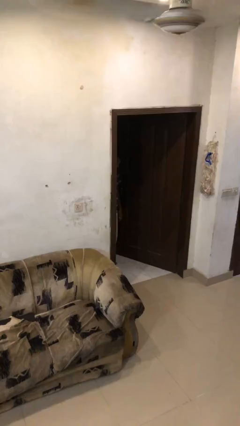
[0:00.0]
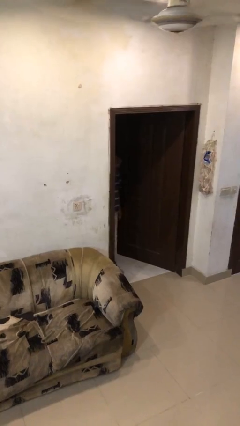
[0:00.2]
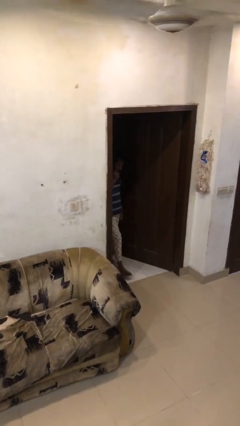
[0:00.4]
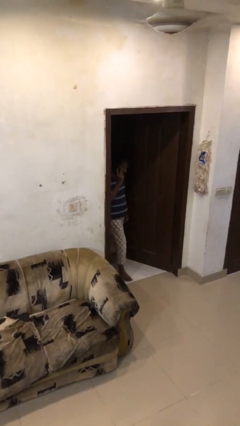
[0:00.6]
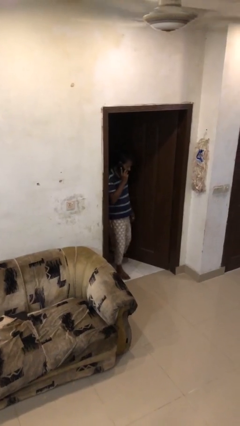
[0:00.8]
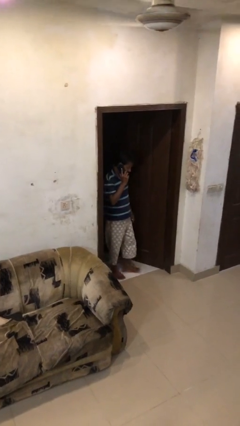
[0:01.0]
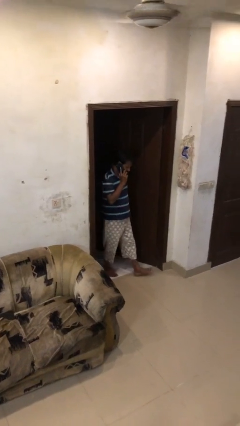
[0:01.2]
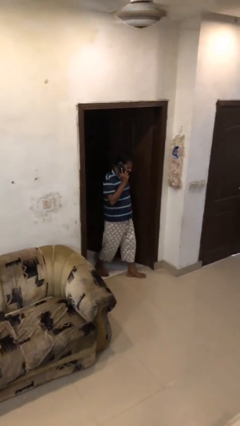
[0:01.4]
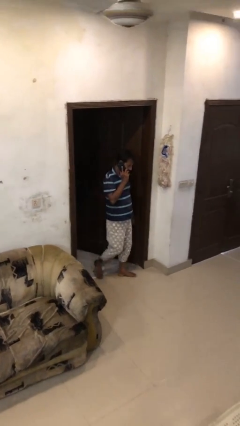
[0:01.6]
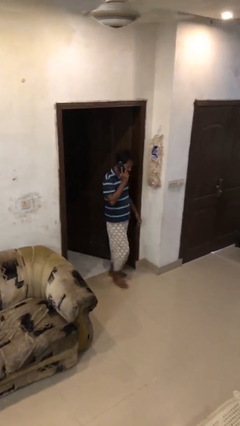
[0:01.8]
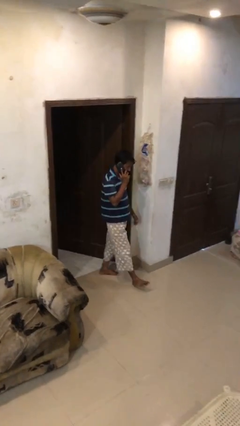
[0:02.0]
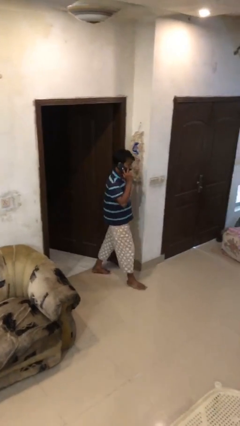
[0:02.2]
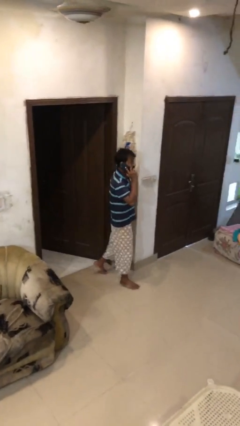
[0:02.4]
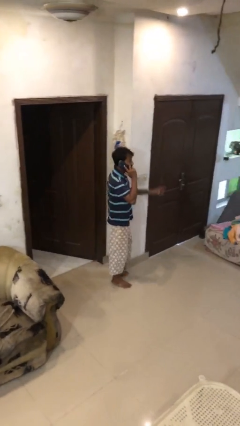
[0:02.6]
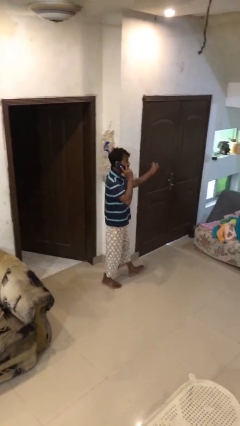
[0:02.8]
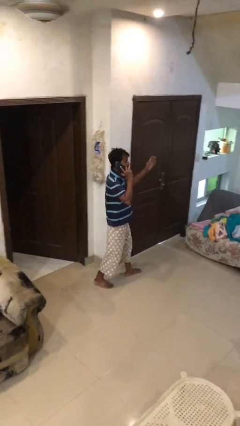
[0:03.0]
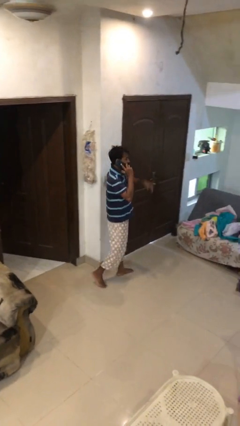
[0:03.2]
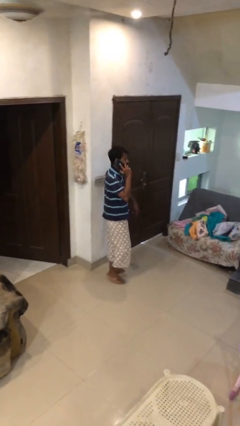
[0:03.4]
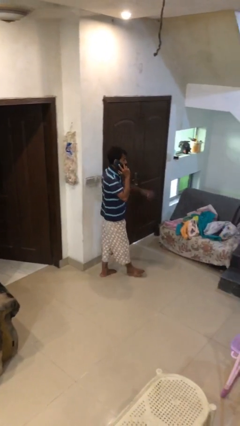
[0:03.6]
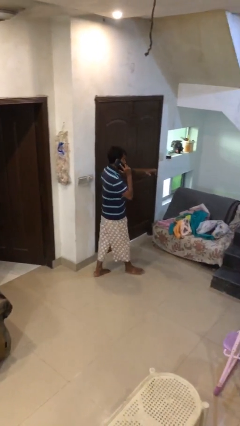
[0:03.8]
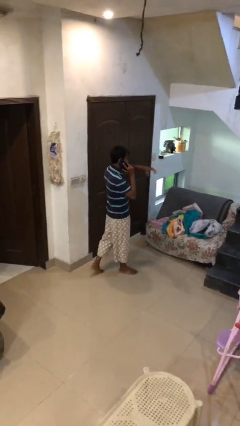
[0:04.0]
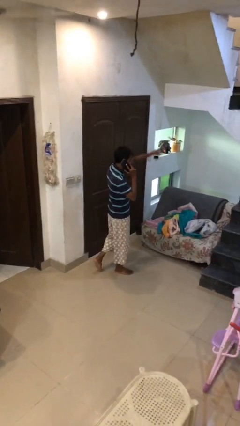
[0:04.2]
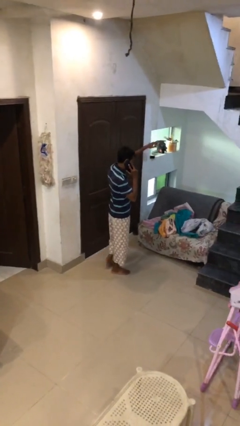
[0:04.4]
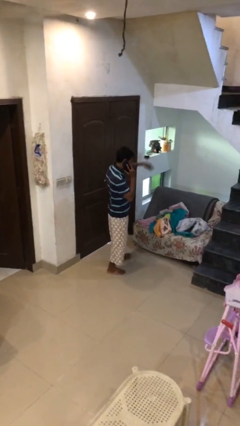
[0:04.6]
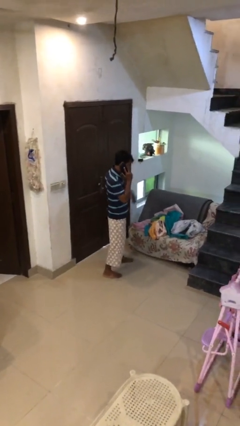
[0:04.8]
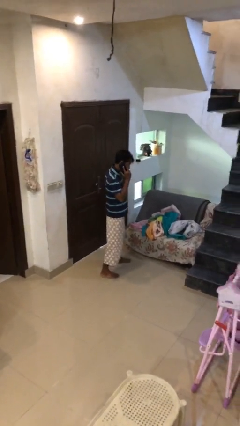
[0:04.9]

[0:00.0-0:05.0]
person enters scene through structure

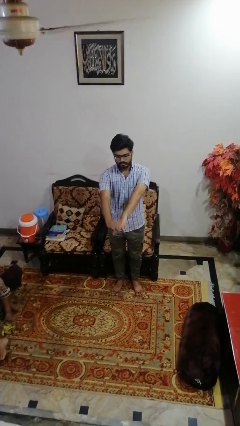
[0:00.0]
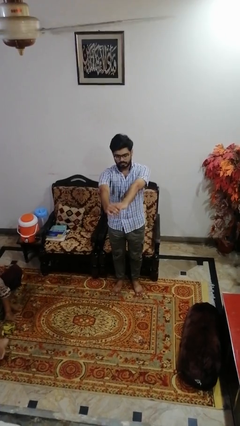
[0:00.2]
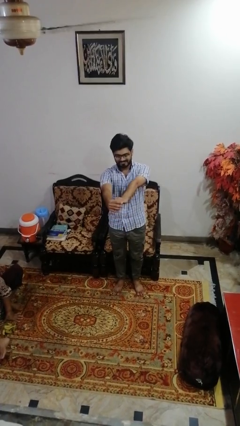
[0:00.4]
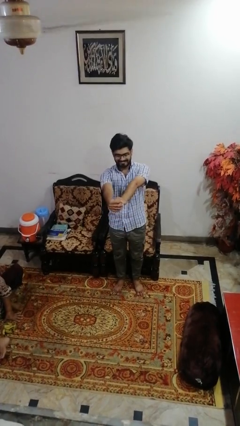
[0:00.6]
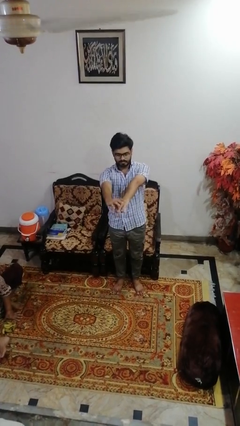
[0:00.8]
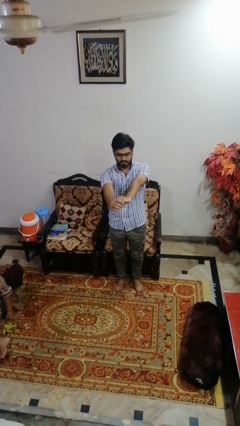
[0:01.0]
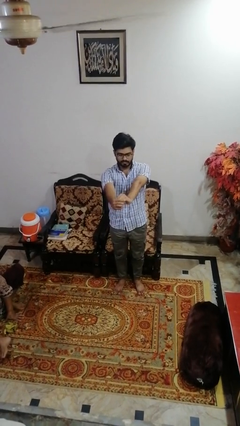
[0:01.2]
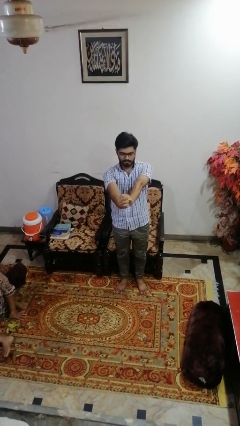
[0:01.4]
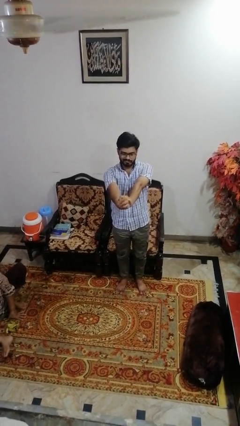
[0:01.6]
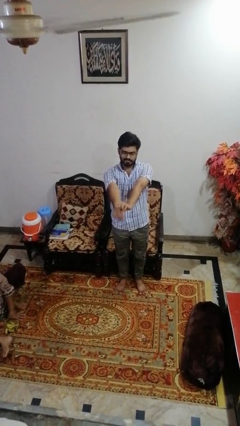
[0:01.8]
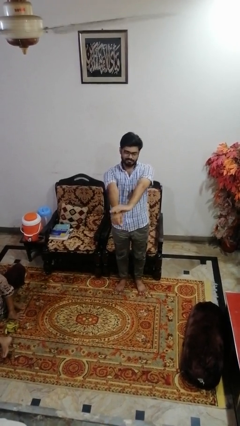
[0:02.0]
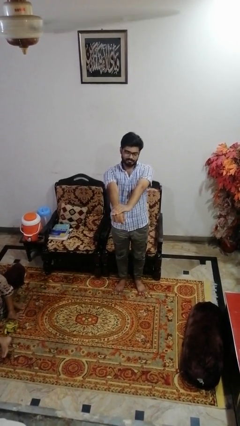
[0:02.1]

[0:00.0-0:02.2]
person cracks knuckles

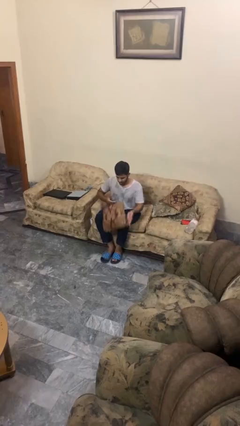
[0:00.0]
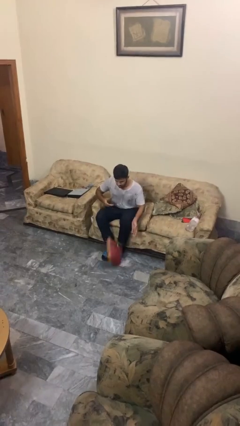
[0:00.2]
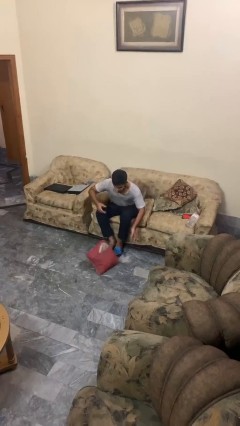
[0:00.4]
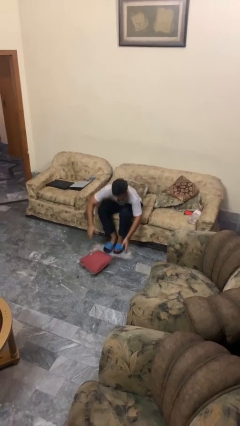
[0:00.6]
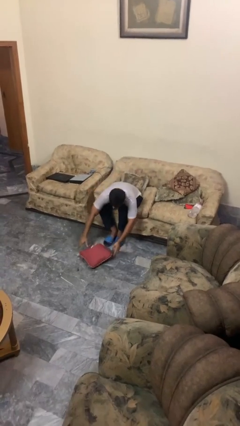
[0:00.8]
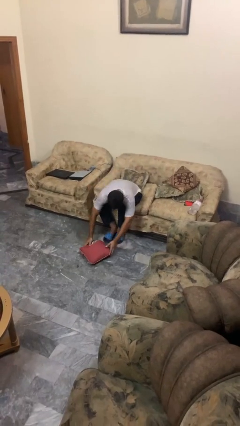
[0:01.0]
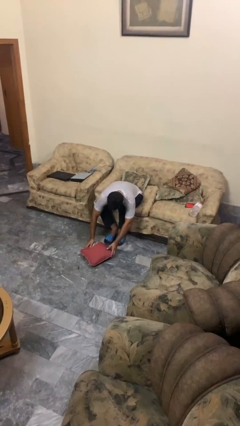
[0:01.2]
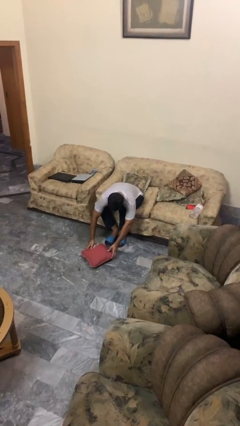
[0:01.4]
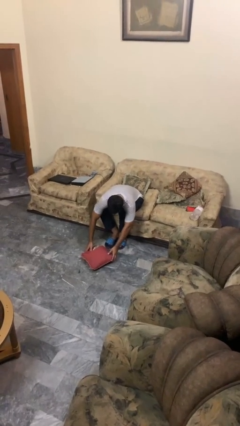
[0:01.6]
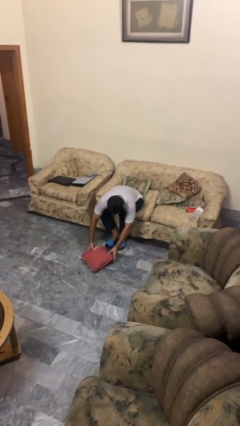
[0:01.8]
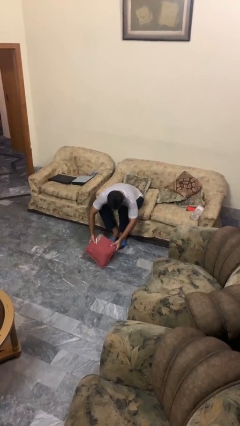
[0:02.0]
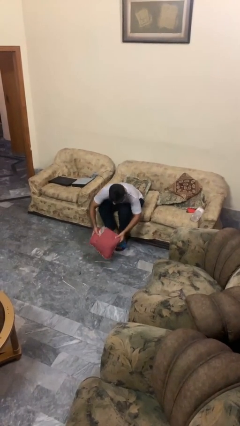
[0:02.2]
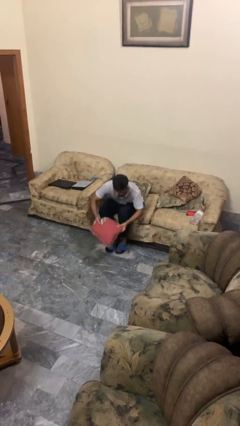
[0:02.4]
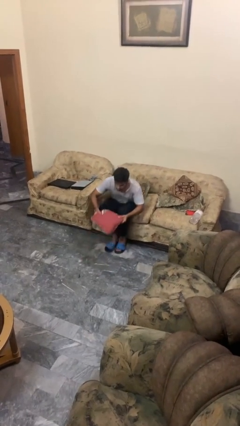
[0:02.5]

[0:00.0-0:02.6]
person drops object

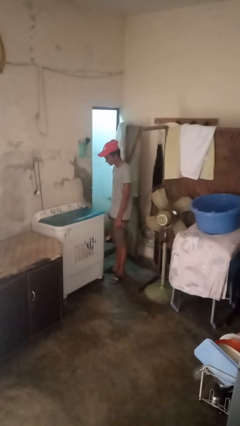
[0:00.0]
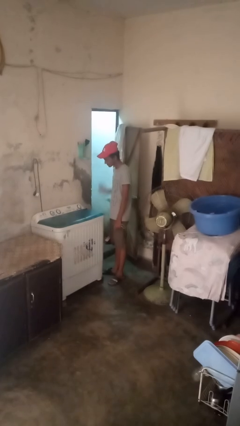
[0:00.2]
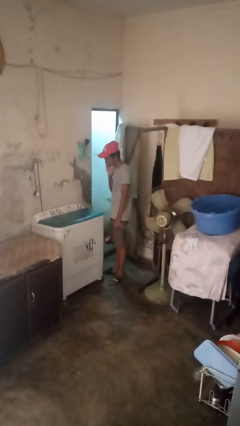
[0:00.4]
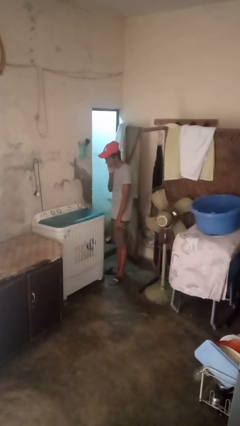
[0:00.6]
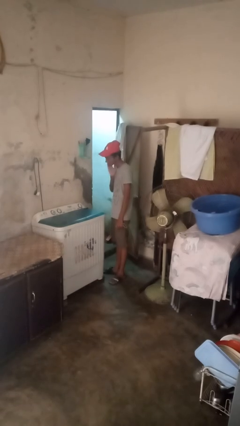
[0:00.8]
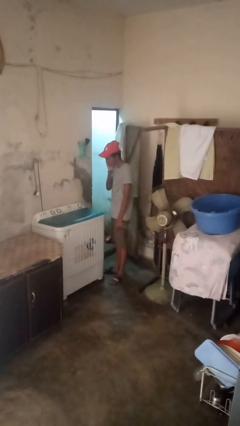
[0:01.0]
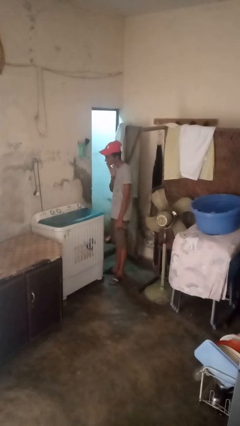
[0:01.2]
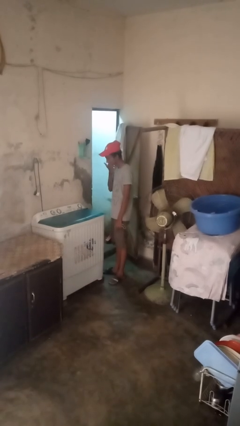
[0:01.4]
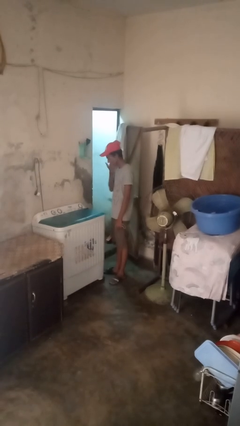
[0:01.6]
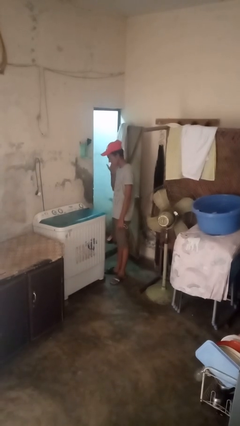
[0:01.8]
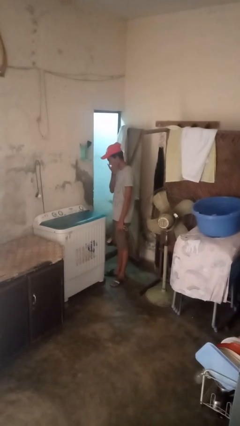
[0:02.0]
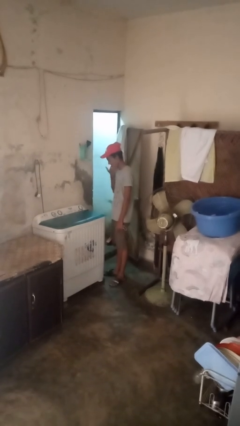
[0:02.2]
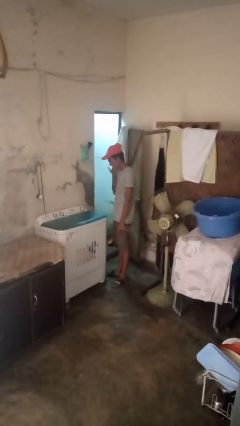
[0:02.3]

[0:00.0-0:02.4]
person applies shaving cream

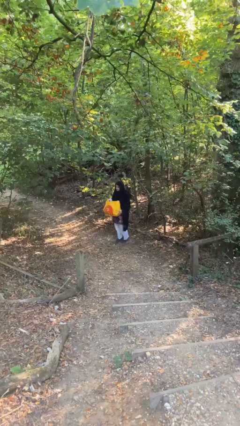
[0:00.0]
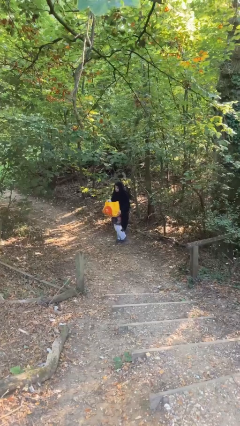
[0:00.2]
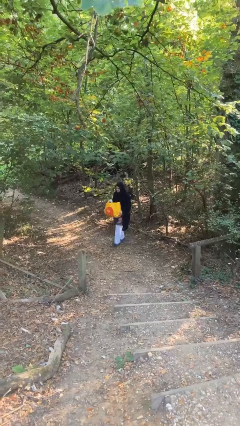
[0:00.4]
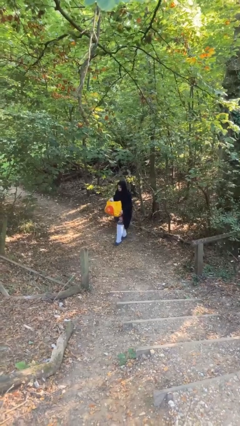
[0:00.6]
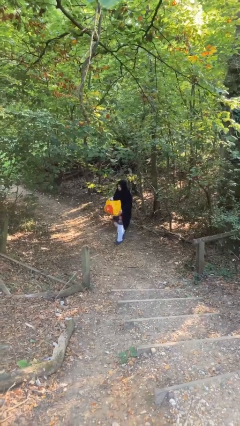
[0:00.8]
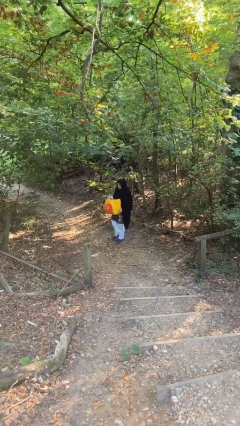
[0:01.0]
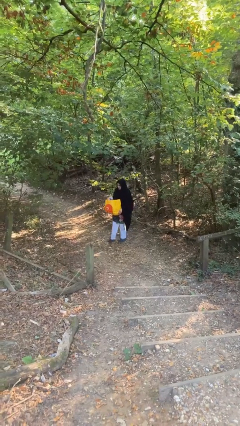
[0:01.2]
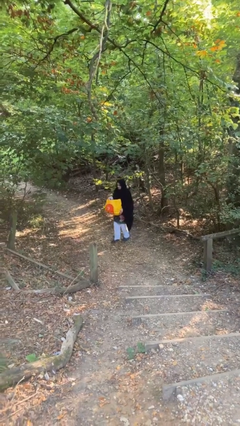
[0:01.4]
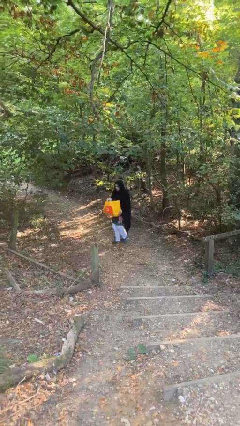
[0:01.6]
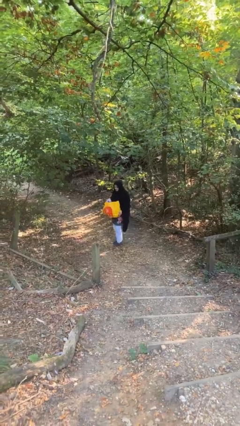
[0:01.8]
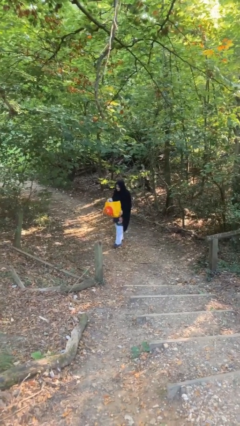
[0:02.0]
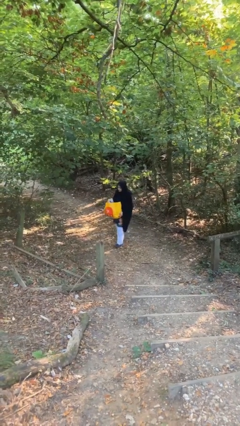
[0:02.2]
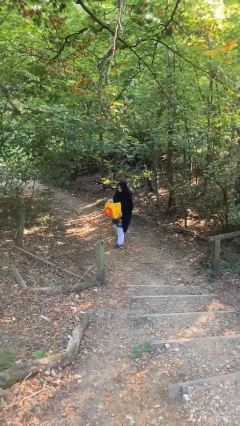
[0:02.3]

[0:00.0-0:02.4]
person carries heavy object

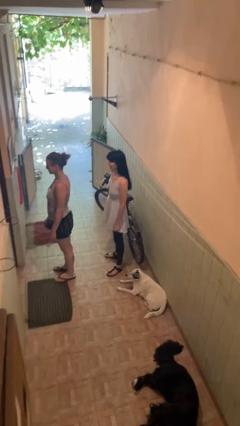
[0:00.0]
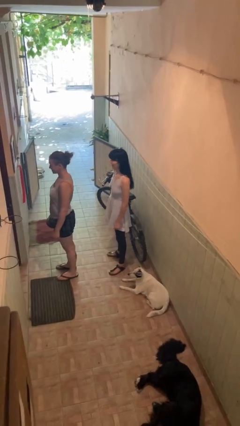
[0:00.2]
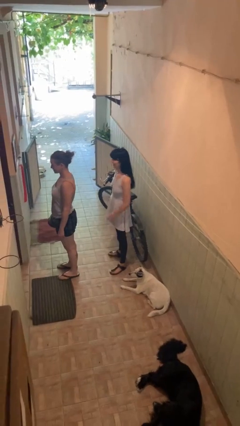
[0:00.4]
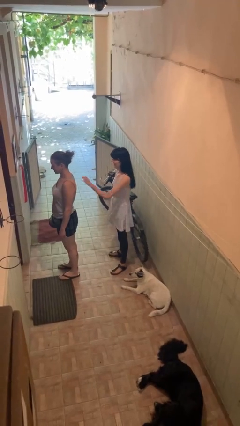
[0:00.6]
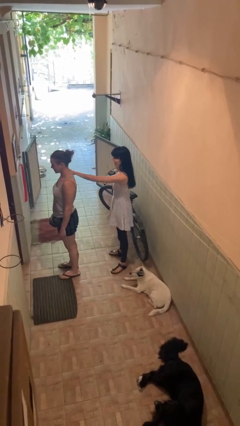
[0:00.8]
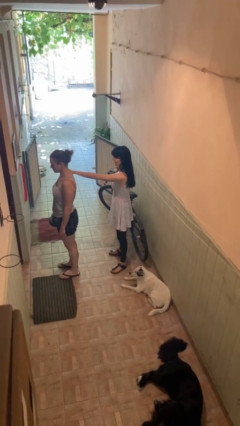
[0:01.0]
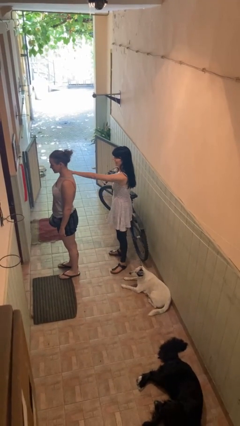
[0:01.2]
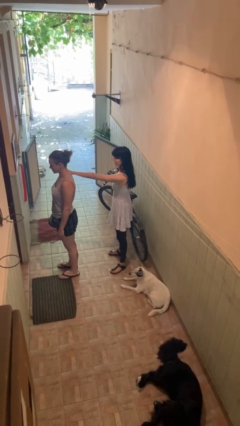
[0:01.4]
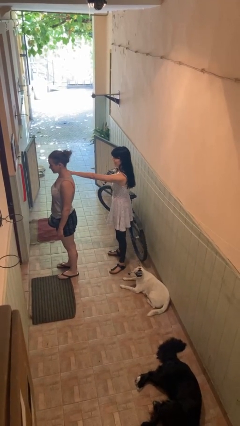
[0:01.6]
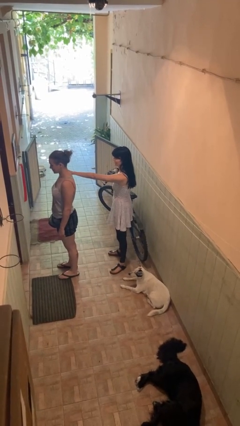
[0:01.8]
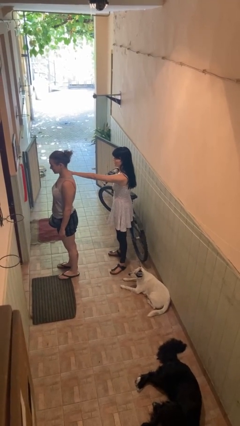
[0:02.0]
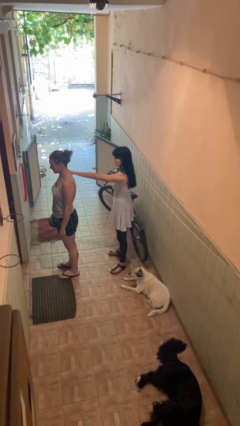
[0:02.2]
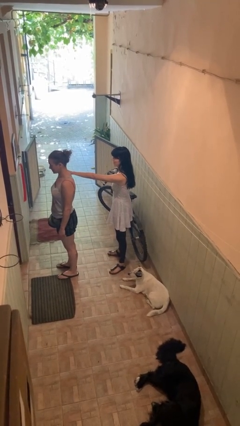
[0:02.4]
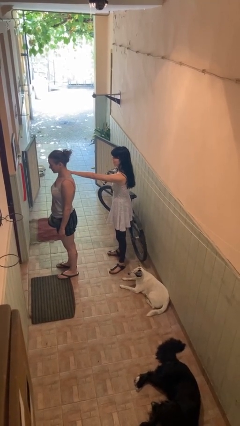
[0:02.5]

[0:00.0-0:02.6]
person grabs person by shoulder
